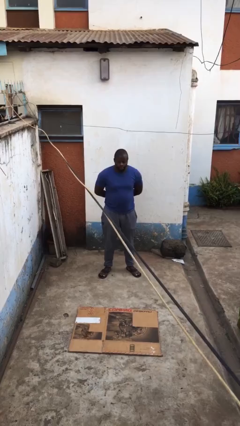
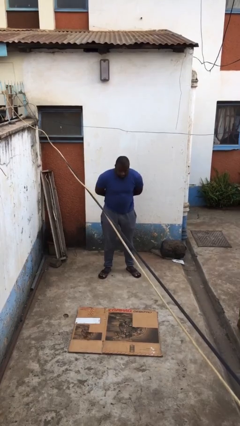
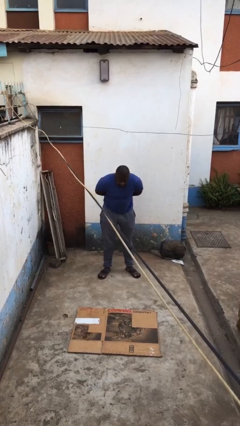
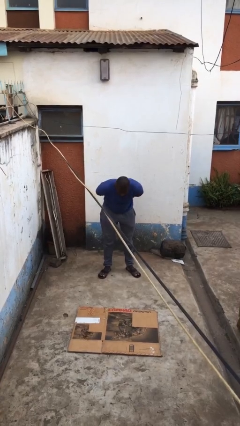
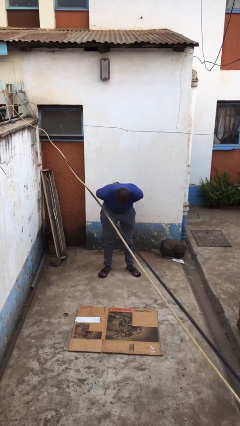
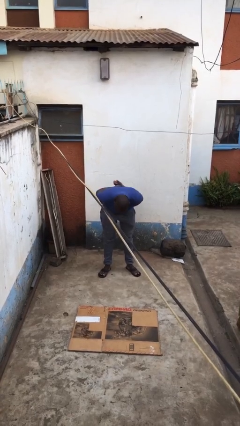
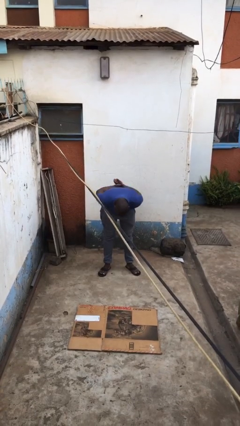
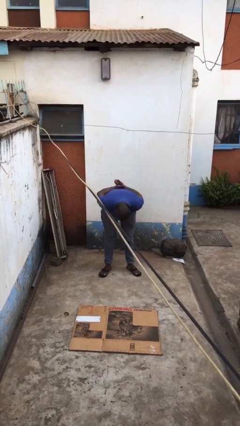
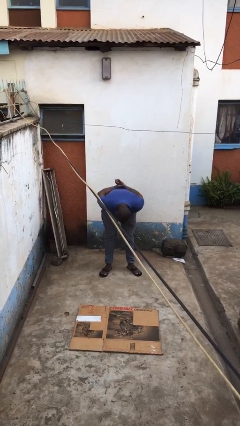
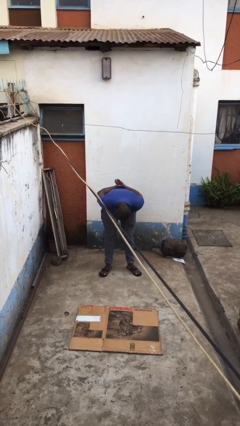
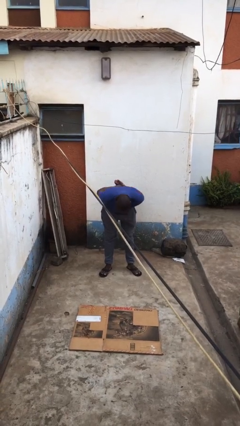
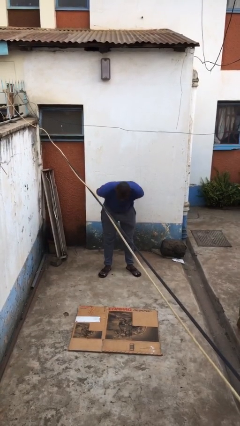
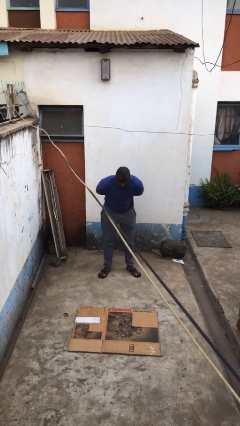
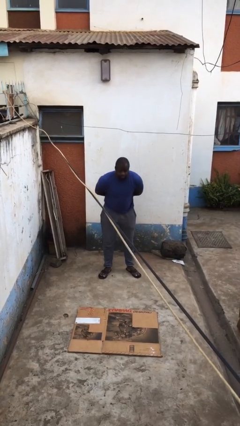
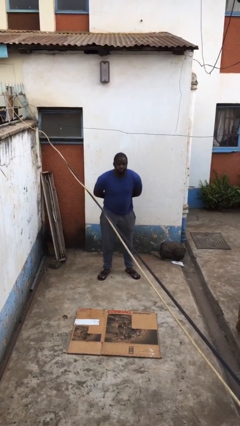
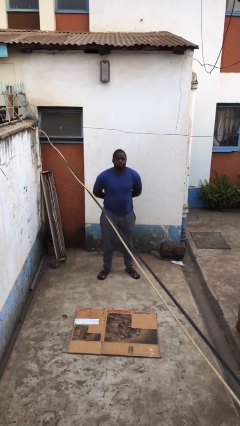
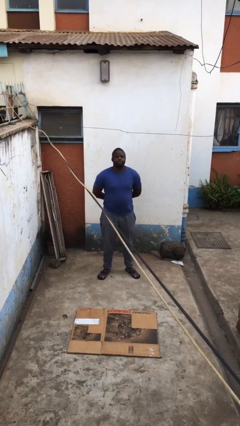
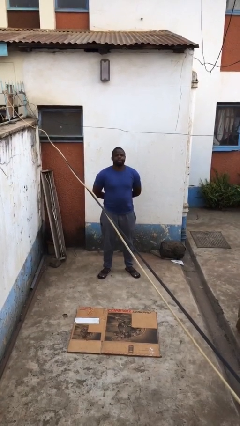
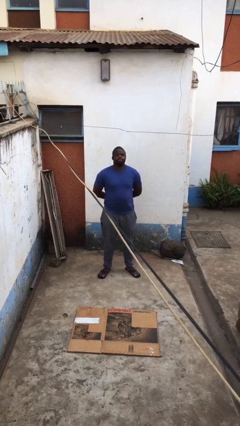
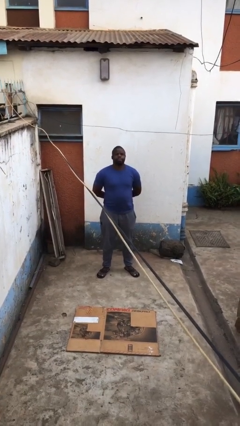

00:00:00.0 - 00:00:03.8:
person bows

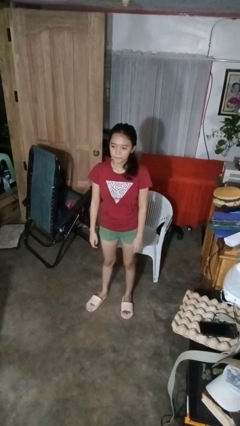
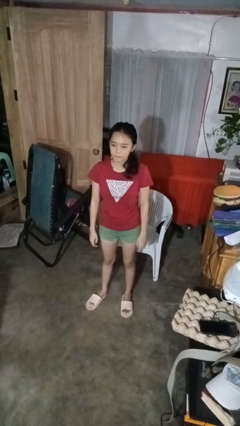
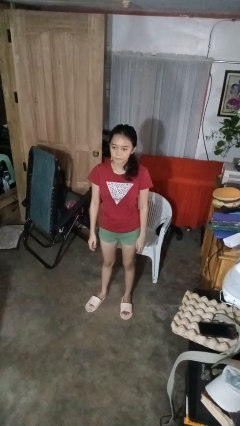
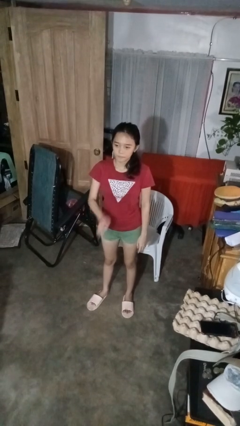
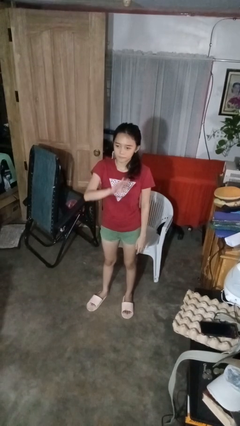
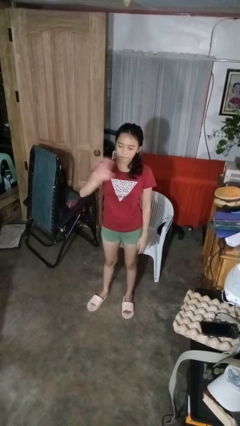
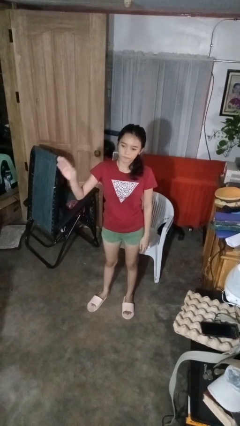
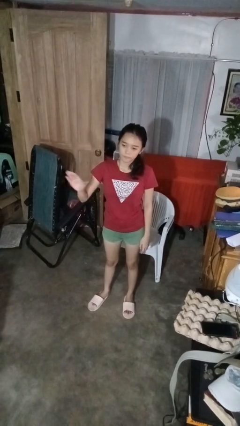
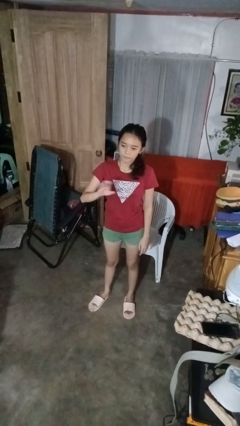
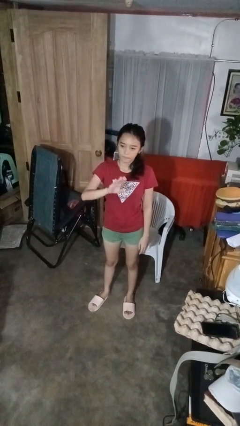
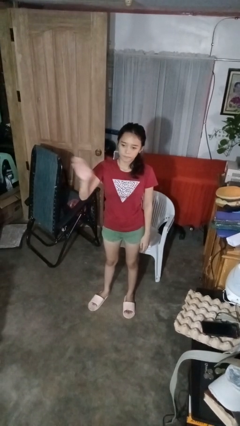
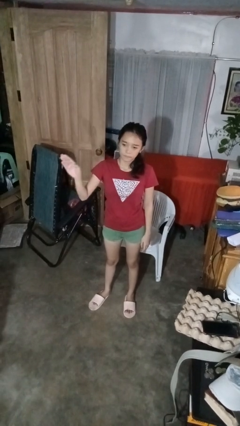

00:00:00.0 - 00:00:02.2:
person gestures swipe right

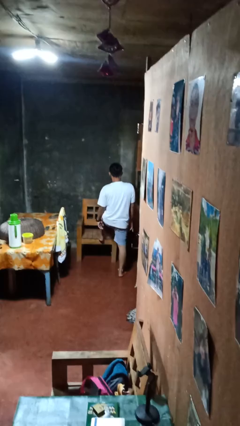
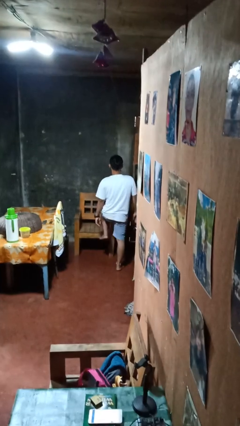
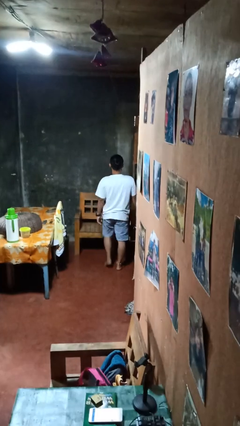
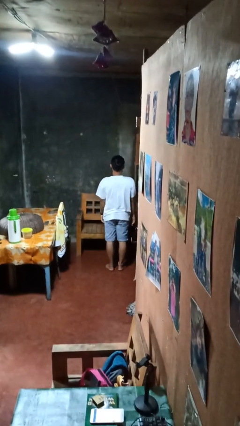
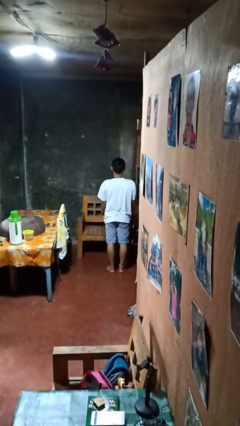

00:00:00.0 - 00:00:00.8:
person climbs off chair

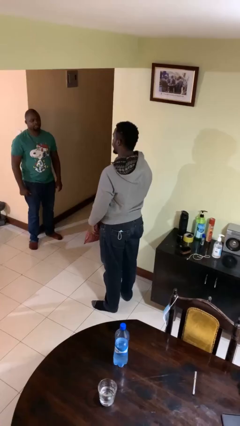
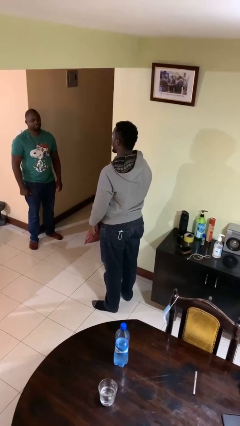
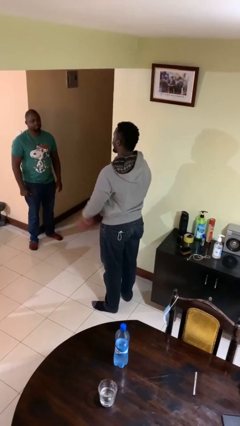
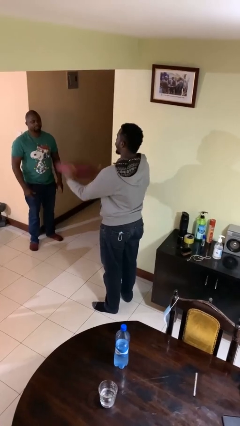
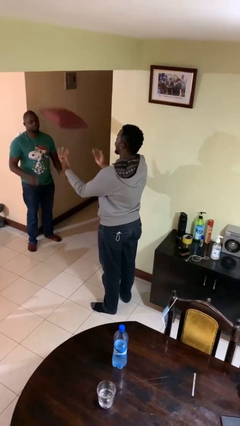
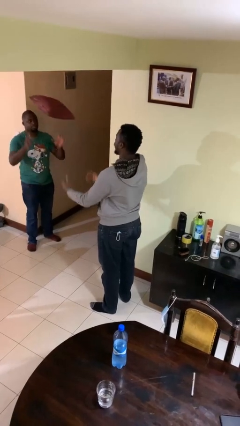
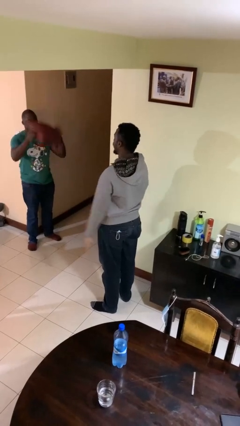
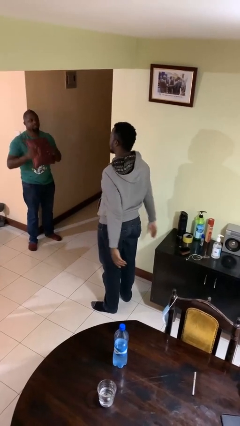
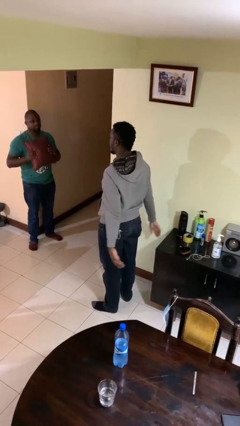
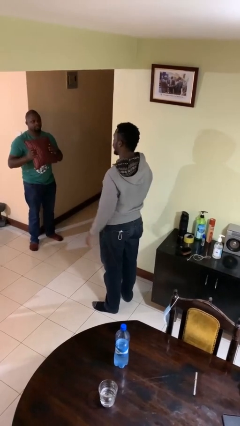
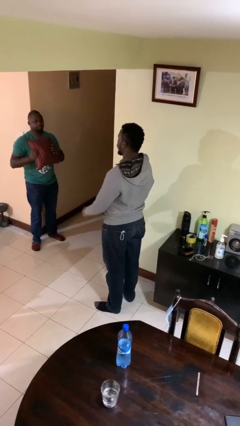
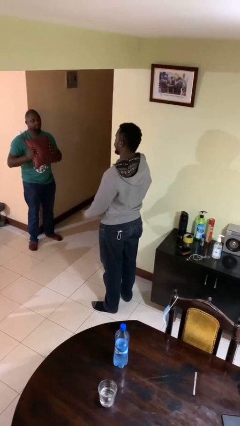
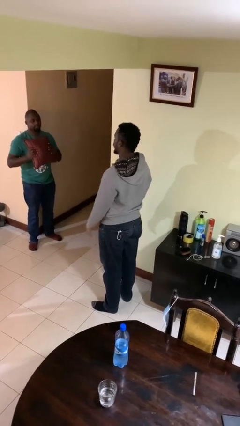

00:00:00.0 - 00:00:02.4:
person throws object to person

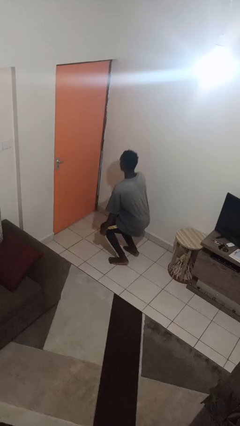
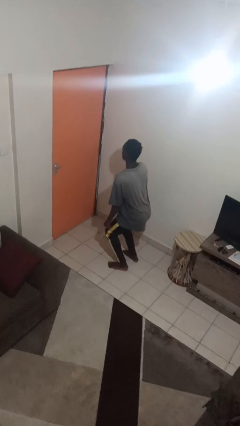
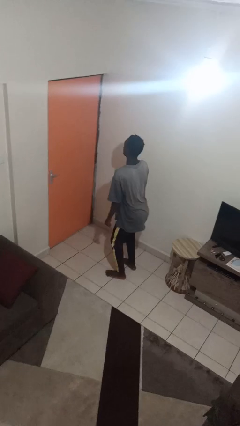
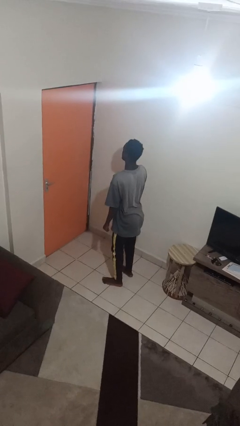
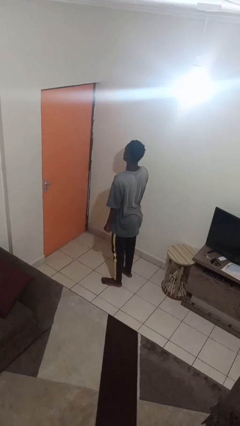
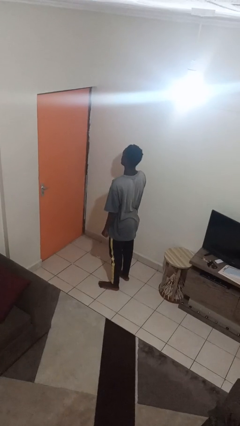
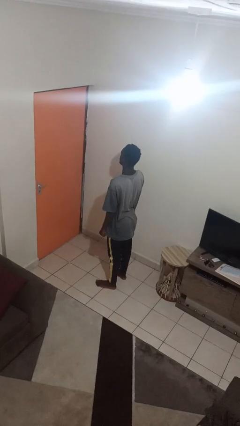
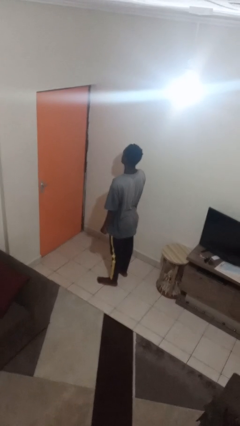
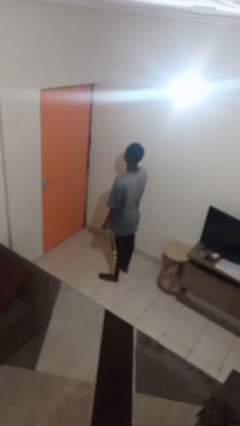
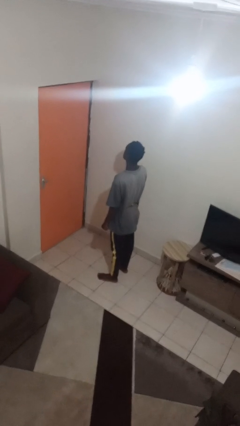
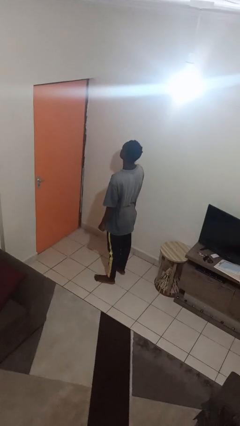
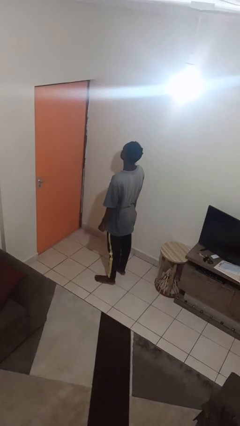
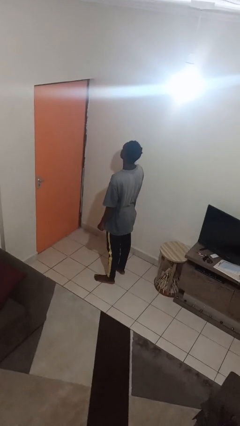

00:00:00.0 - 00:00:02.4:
person stands up

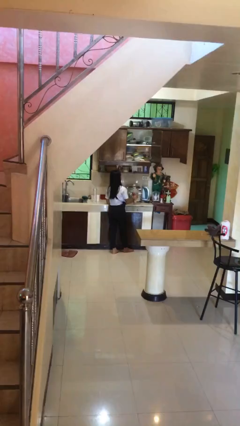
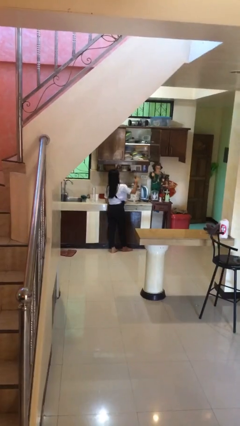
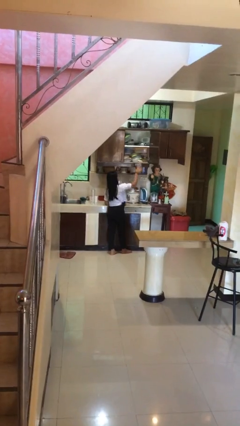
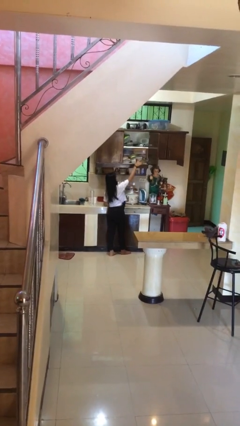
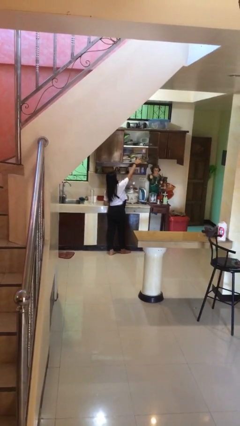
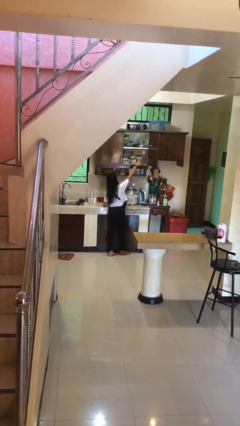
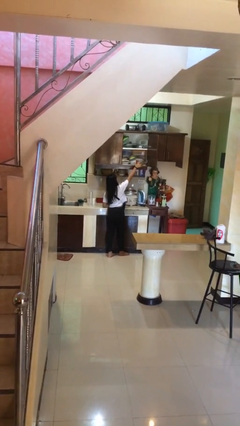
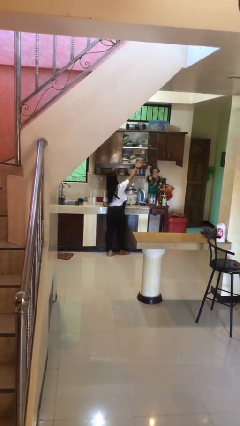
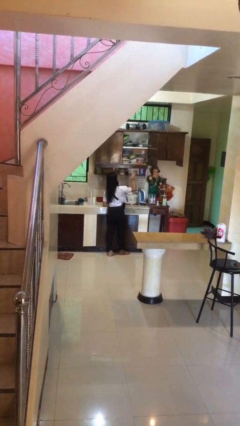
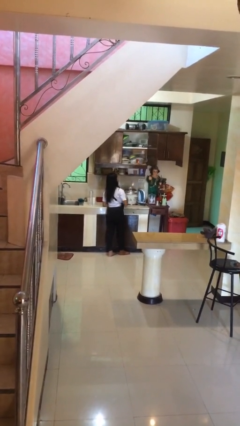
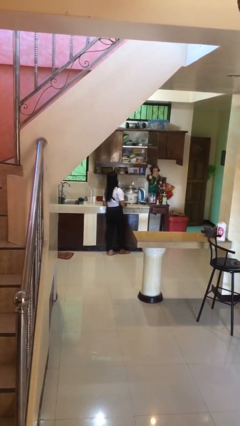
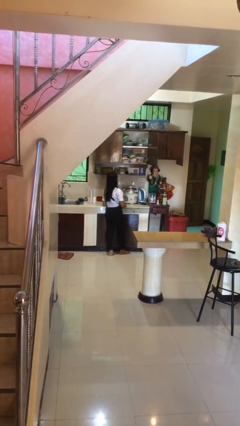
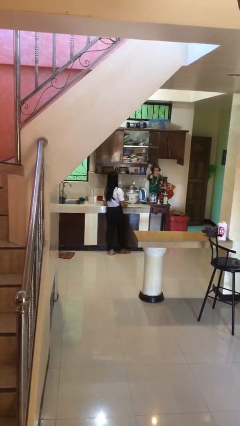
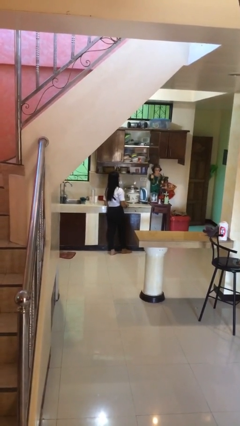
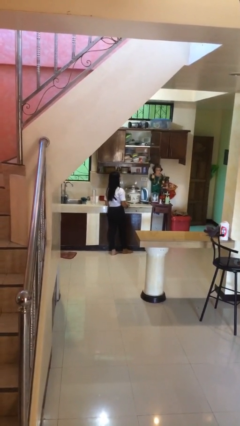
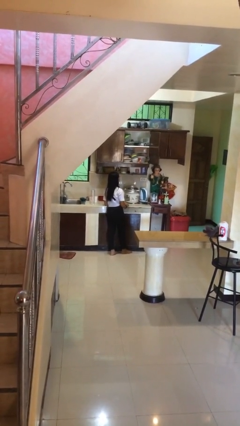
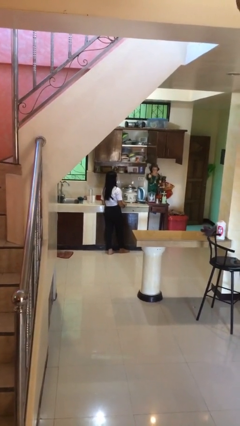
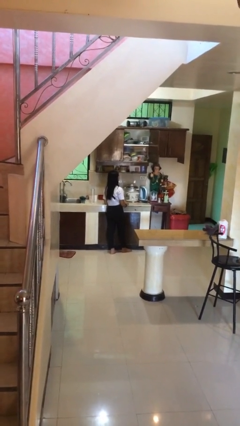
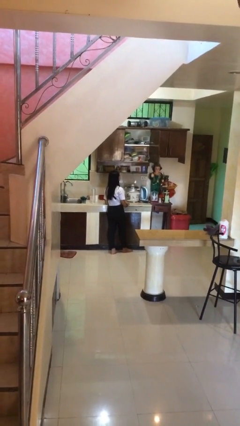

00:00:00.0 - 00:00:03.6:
person puts down object on shelf

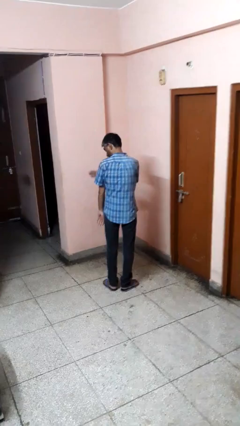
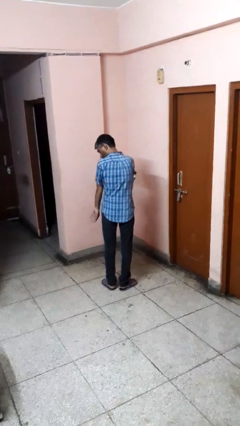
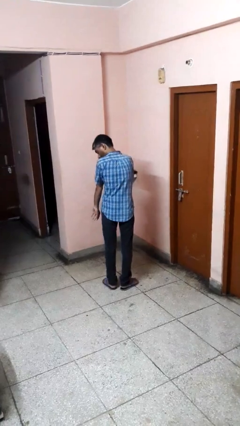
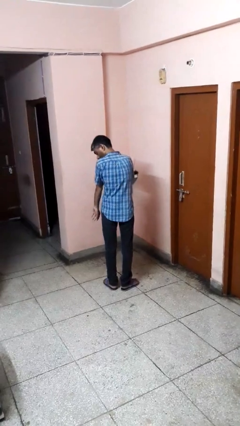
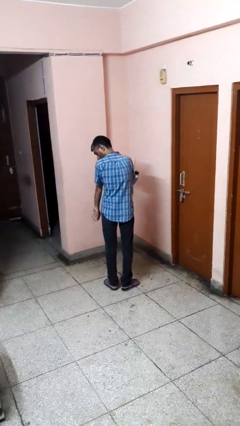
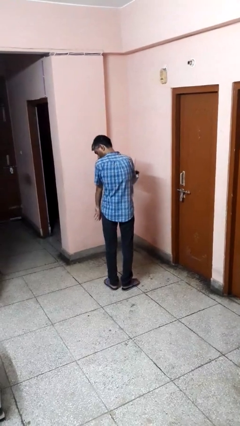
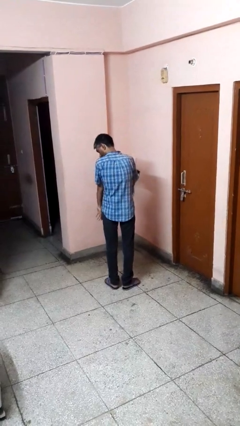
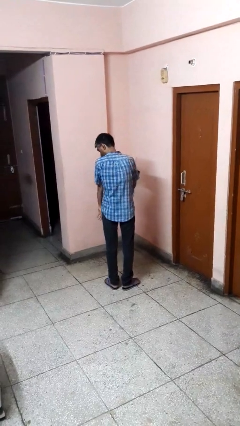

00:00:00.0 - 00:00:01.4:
person swats bug

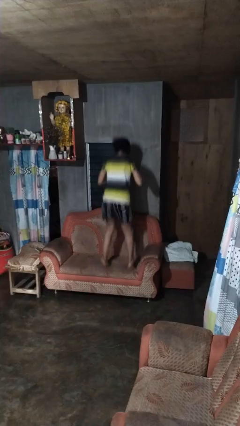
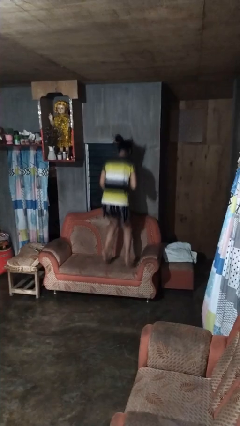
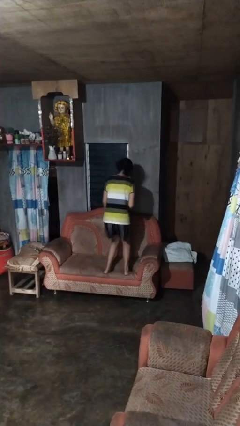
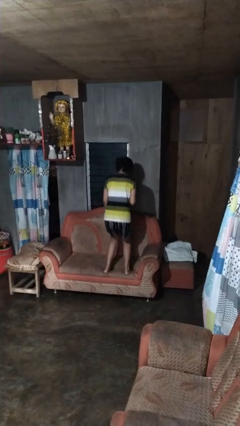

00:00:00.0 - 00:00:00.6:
person jumps on couch
